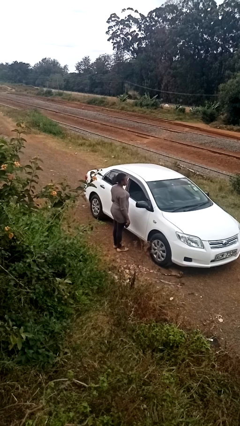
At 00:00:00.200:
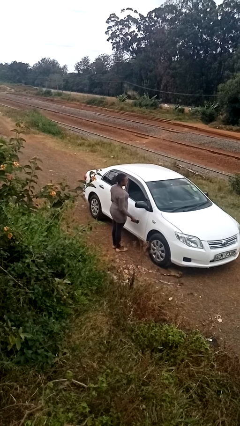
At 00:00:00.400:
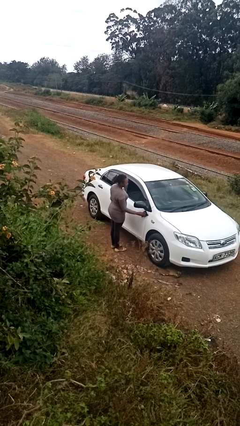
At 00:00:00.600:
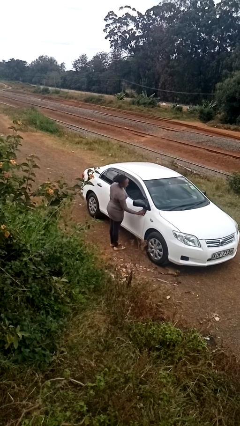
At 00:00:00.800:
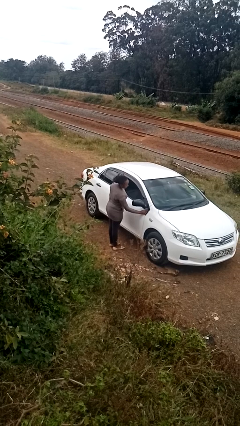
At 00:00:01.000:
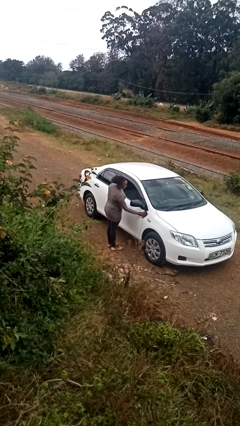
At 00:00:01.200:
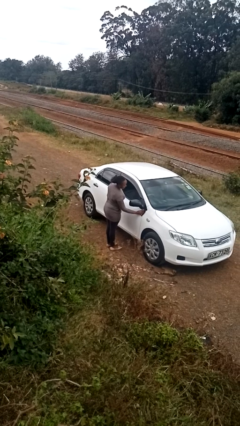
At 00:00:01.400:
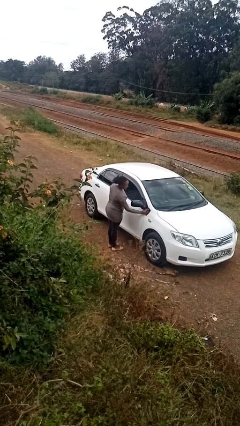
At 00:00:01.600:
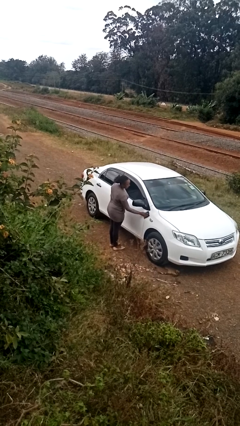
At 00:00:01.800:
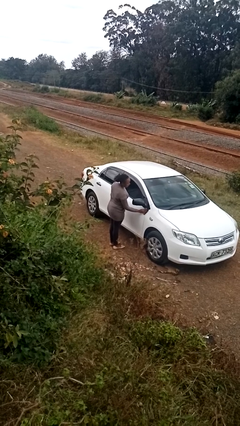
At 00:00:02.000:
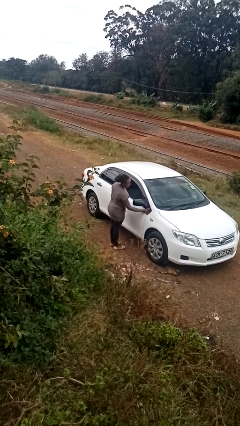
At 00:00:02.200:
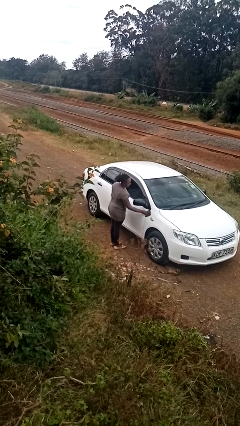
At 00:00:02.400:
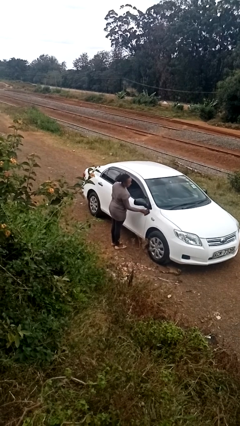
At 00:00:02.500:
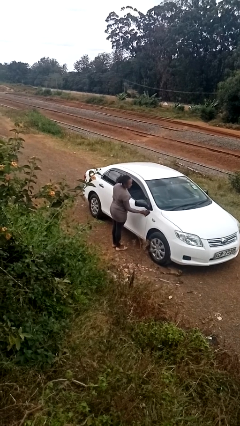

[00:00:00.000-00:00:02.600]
person polishes car with rag

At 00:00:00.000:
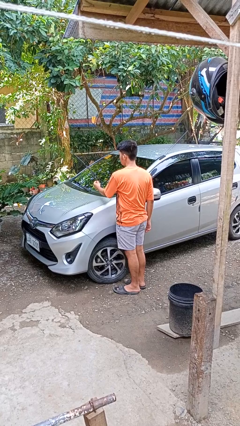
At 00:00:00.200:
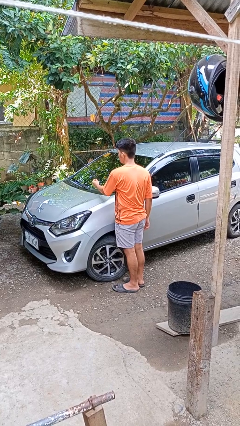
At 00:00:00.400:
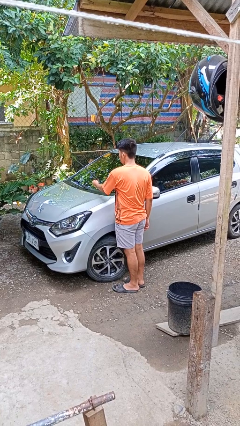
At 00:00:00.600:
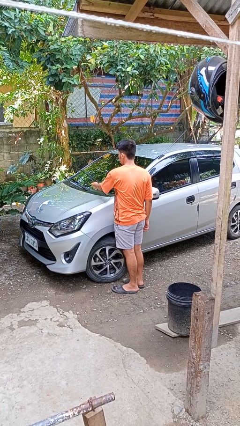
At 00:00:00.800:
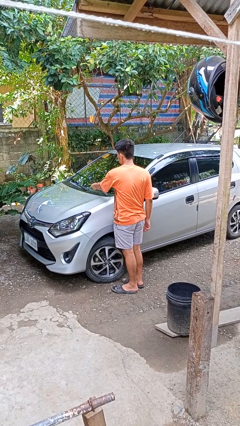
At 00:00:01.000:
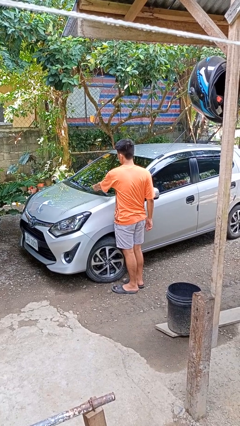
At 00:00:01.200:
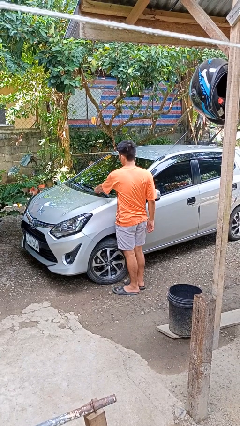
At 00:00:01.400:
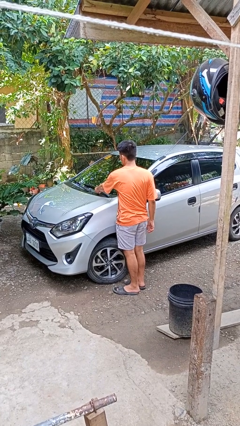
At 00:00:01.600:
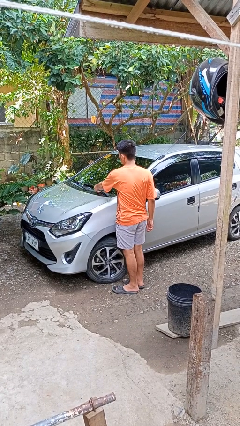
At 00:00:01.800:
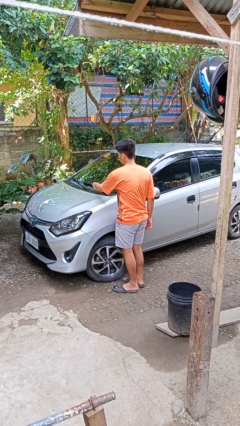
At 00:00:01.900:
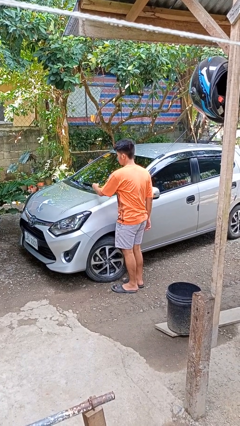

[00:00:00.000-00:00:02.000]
person flips down car wipers

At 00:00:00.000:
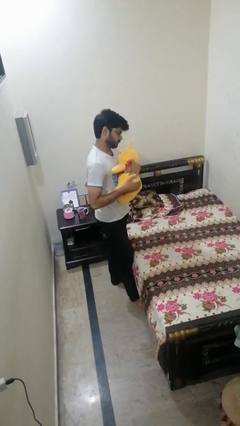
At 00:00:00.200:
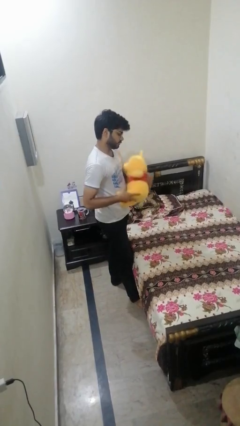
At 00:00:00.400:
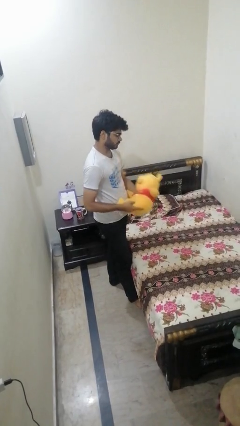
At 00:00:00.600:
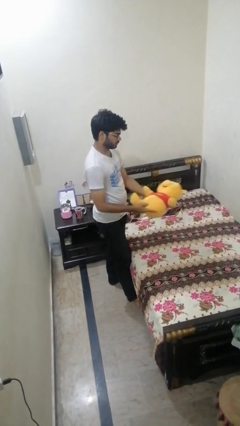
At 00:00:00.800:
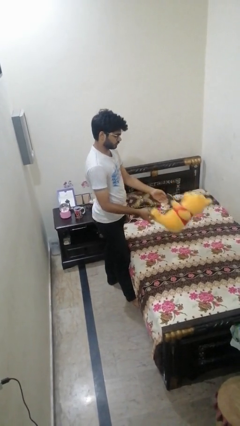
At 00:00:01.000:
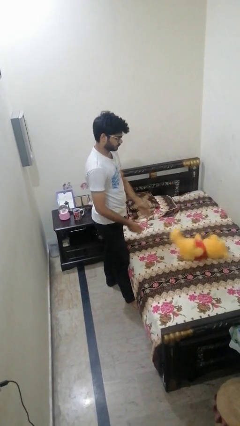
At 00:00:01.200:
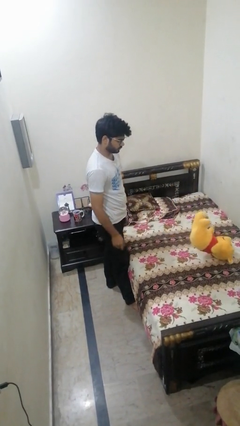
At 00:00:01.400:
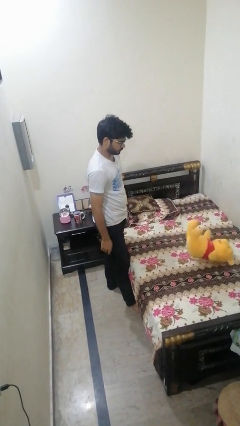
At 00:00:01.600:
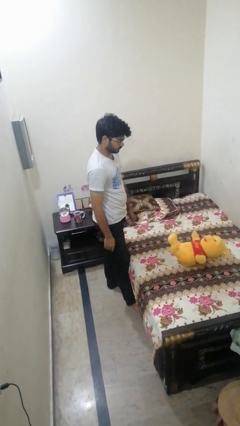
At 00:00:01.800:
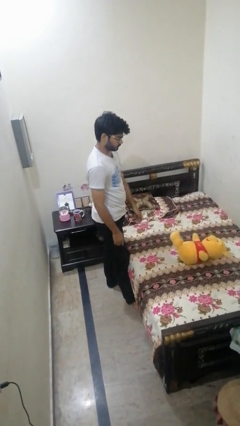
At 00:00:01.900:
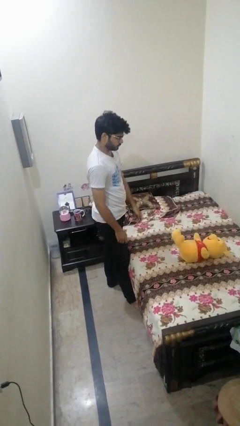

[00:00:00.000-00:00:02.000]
person puts down object on bed

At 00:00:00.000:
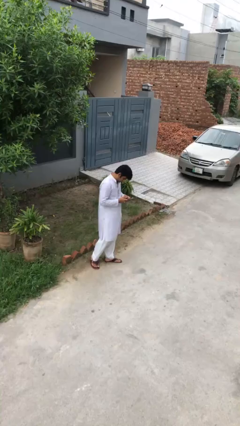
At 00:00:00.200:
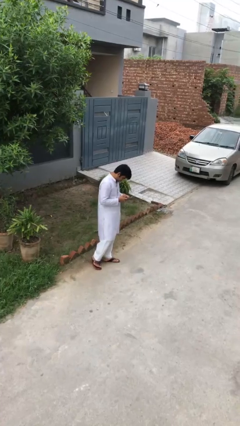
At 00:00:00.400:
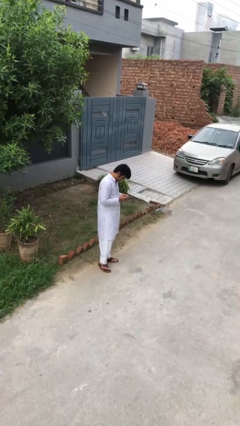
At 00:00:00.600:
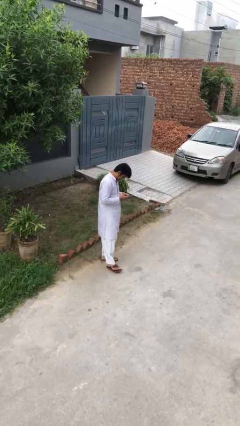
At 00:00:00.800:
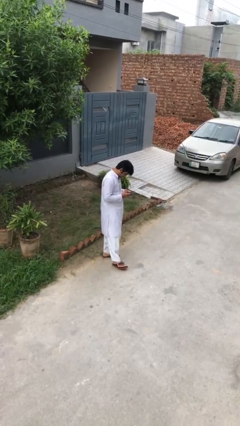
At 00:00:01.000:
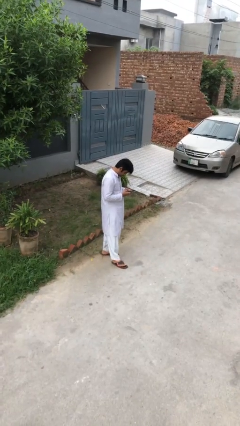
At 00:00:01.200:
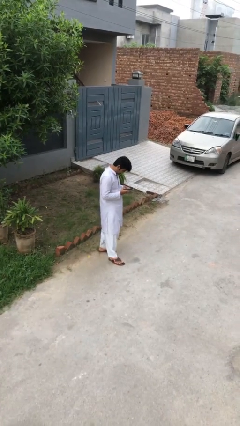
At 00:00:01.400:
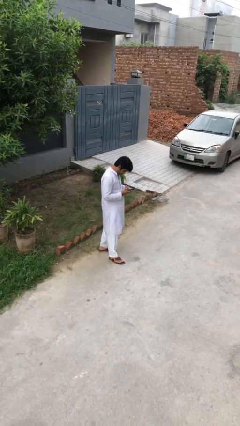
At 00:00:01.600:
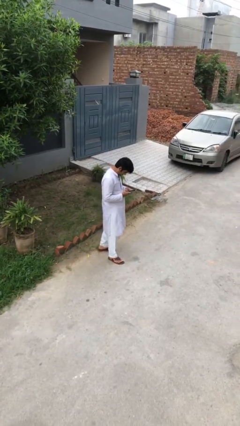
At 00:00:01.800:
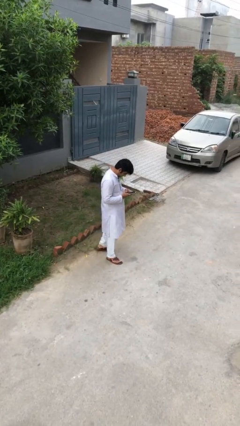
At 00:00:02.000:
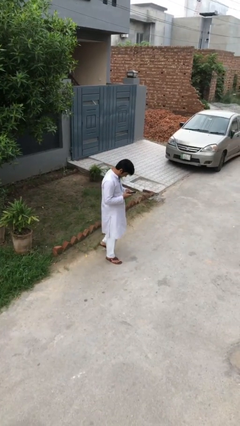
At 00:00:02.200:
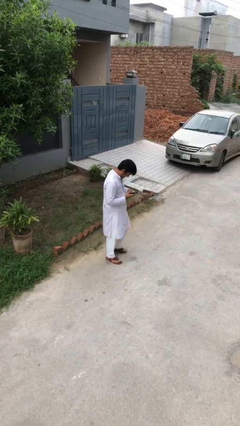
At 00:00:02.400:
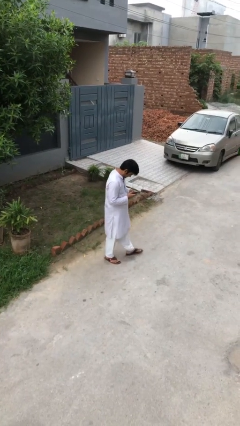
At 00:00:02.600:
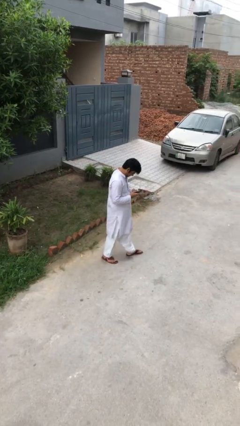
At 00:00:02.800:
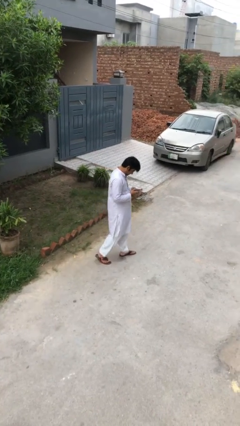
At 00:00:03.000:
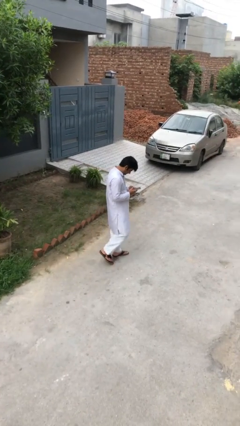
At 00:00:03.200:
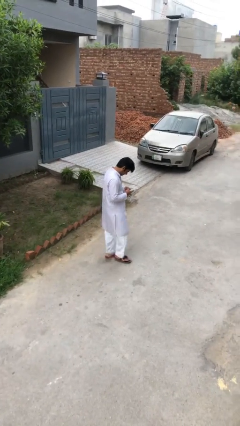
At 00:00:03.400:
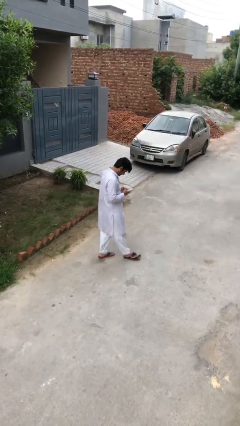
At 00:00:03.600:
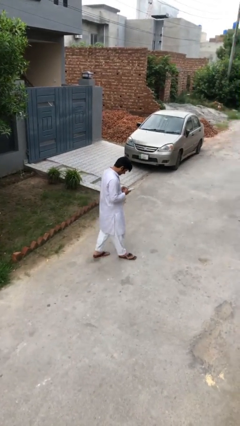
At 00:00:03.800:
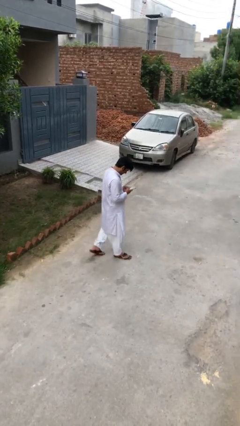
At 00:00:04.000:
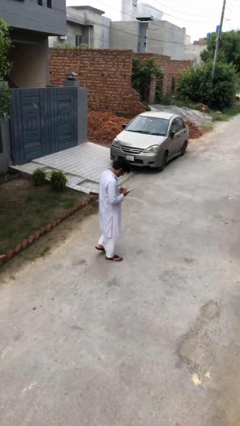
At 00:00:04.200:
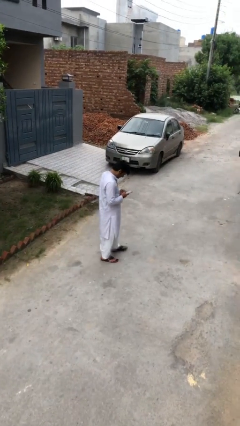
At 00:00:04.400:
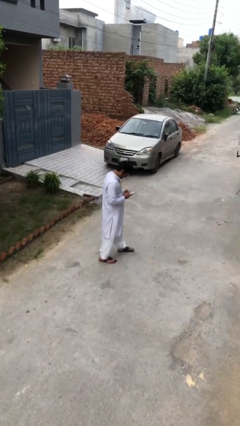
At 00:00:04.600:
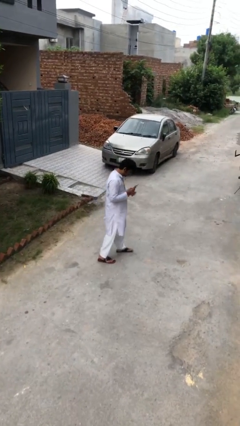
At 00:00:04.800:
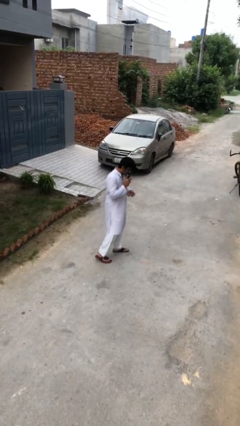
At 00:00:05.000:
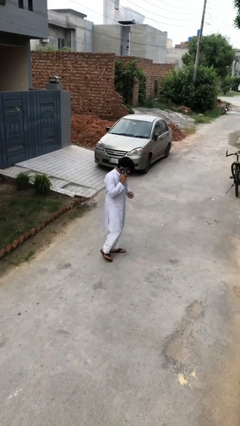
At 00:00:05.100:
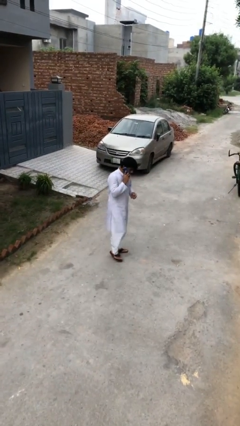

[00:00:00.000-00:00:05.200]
person texts on phone

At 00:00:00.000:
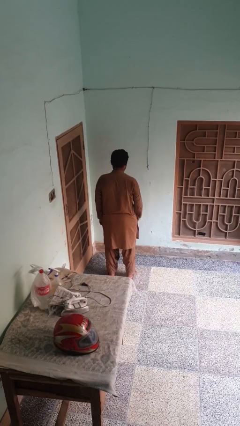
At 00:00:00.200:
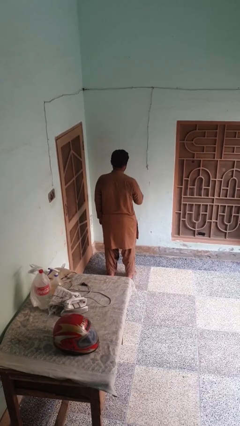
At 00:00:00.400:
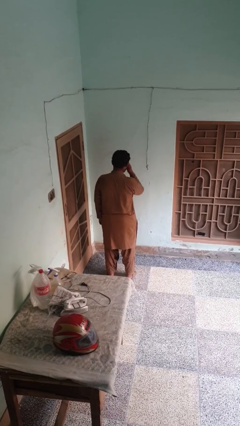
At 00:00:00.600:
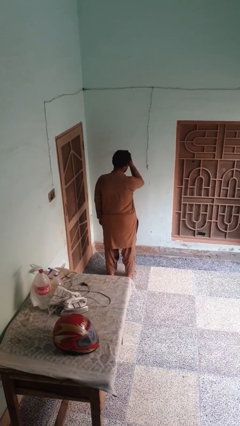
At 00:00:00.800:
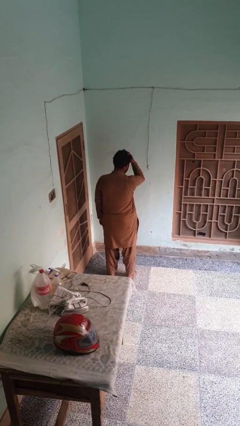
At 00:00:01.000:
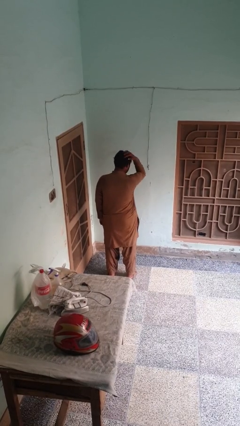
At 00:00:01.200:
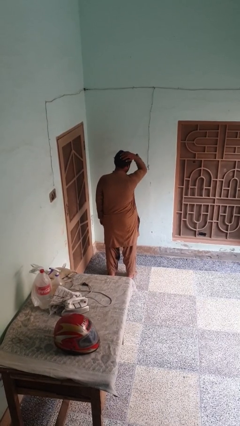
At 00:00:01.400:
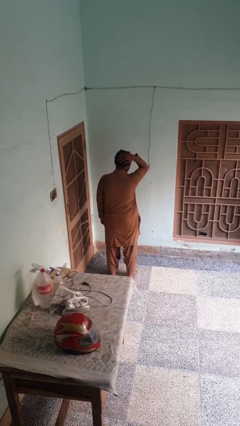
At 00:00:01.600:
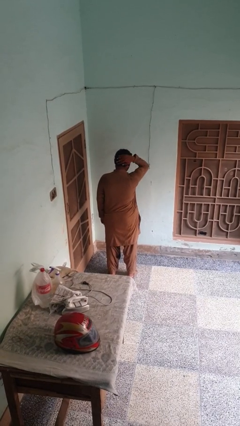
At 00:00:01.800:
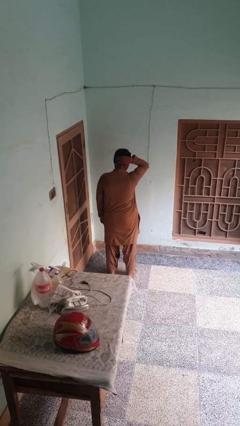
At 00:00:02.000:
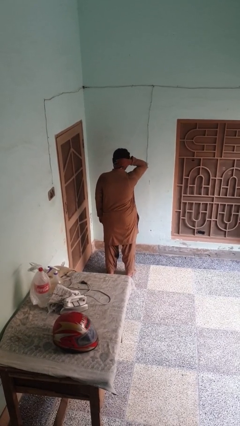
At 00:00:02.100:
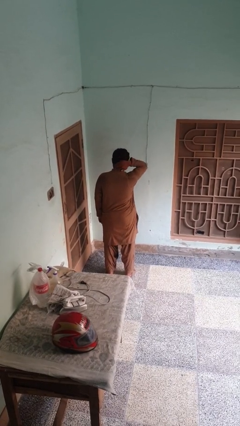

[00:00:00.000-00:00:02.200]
person strokes hair

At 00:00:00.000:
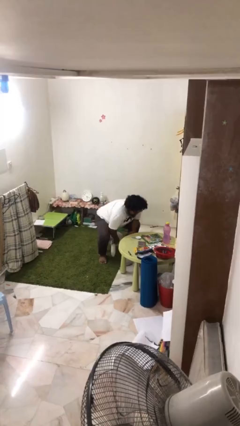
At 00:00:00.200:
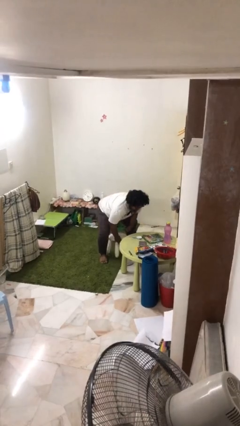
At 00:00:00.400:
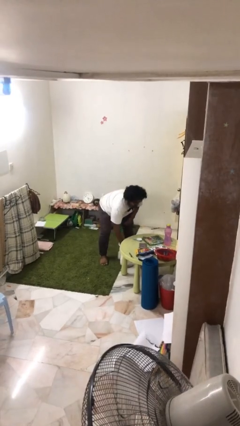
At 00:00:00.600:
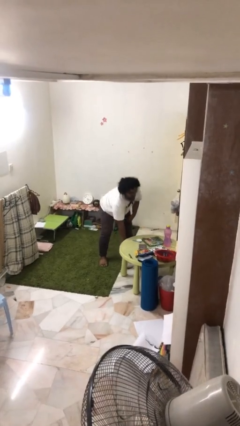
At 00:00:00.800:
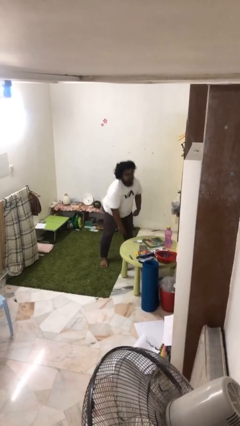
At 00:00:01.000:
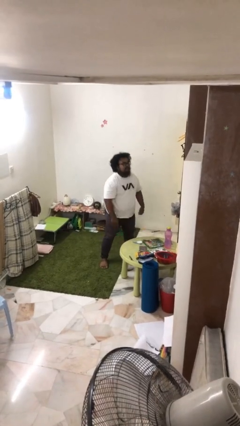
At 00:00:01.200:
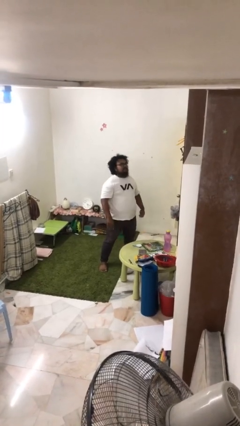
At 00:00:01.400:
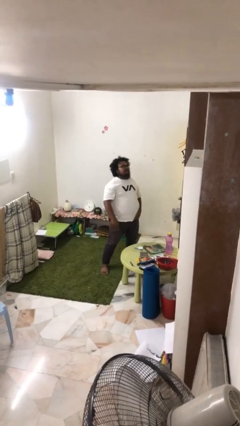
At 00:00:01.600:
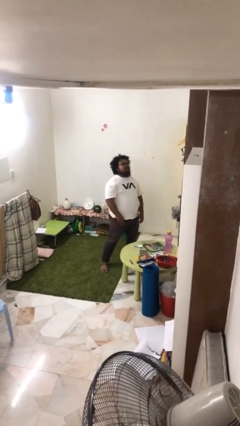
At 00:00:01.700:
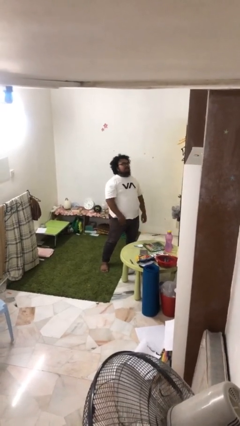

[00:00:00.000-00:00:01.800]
person stands up

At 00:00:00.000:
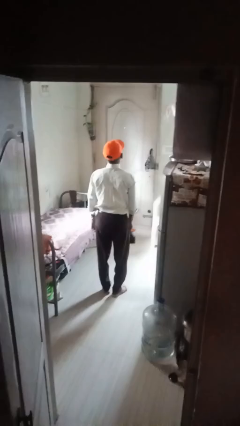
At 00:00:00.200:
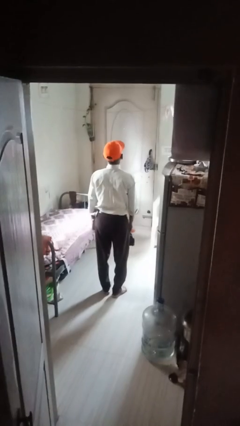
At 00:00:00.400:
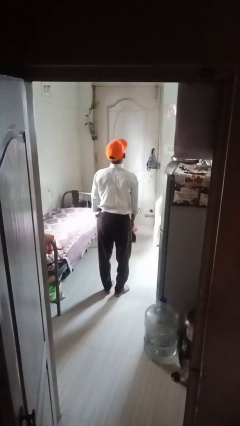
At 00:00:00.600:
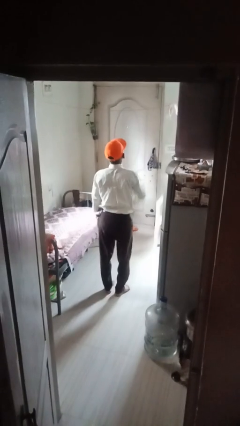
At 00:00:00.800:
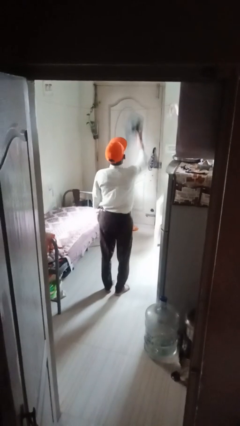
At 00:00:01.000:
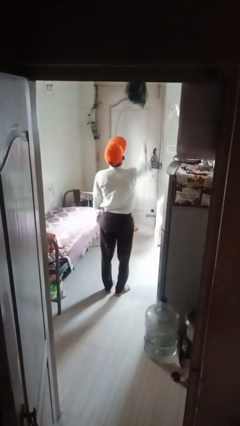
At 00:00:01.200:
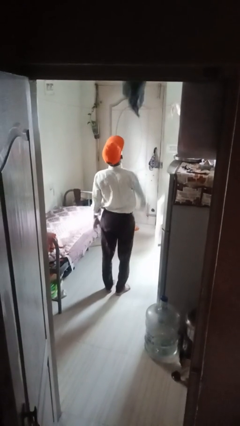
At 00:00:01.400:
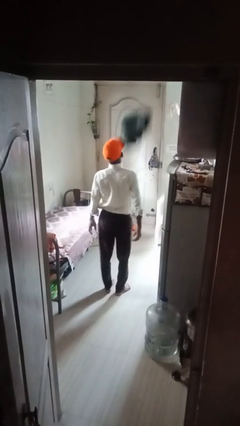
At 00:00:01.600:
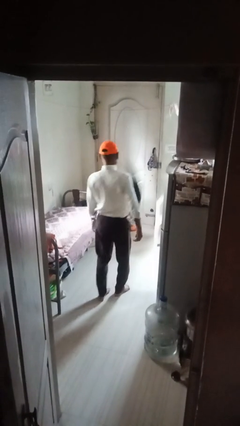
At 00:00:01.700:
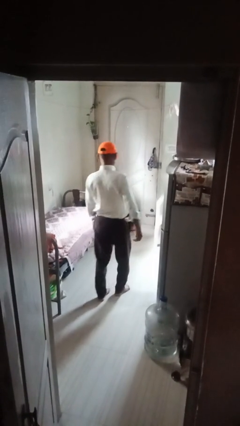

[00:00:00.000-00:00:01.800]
person throws object into air
